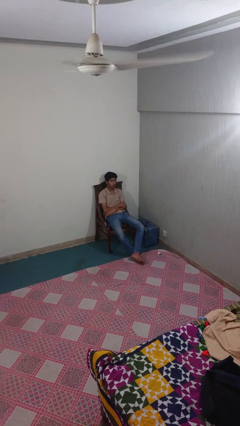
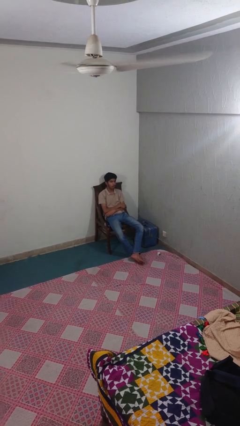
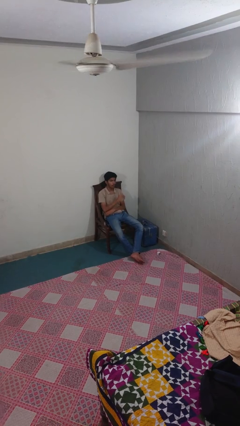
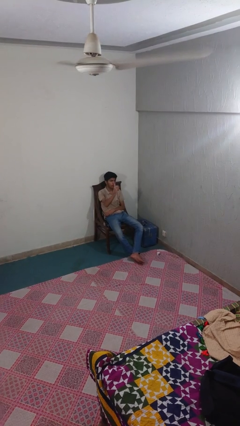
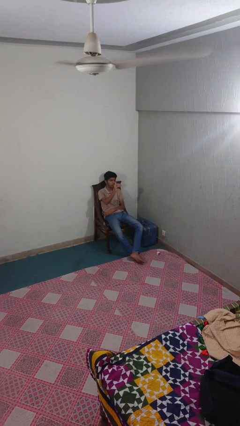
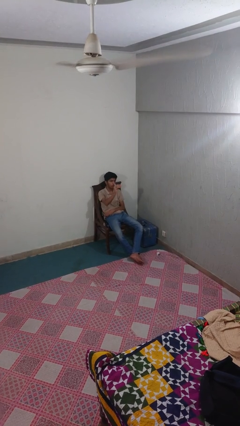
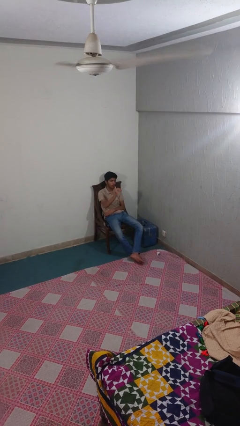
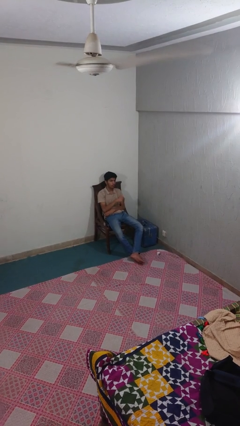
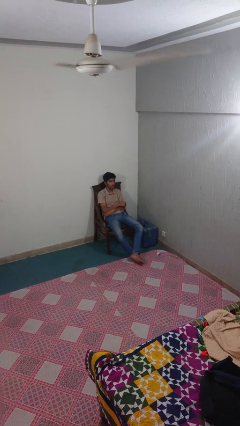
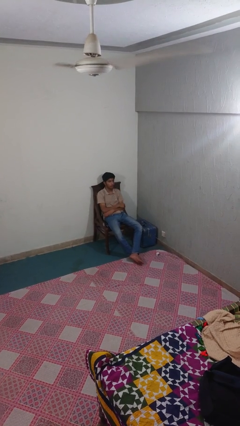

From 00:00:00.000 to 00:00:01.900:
person gestures come here

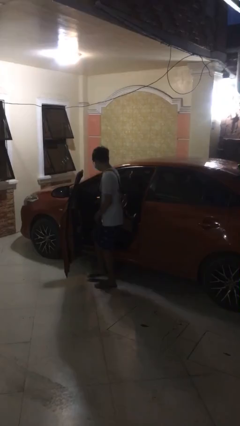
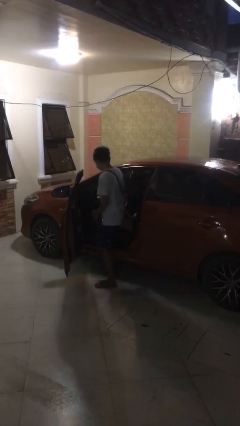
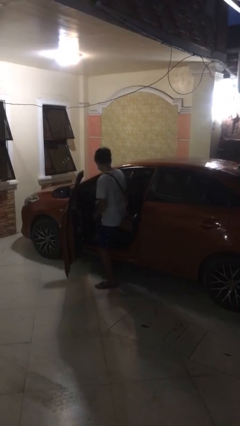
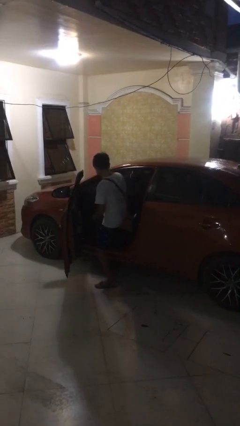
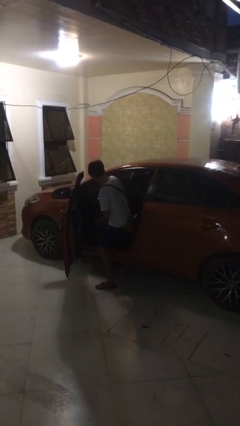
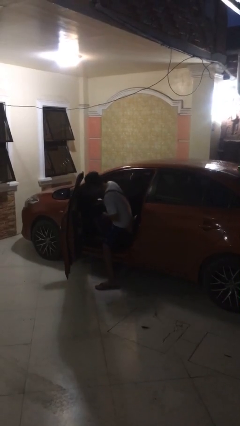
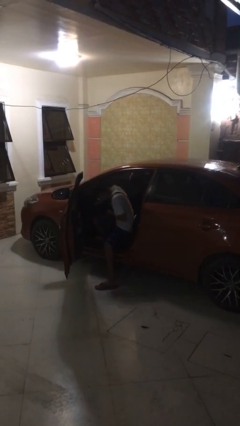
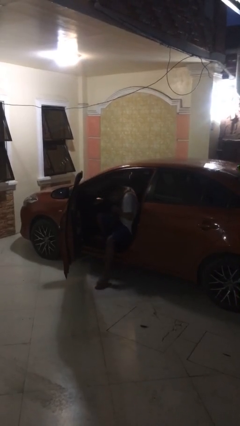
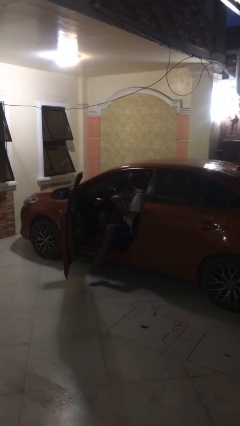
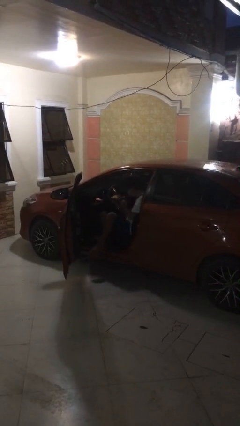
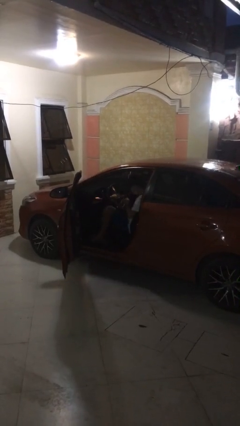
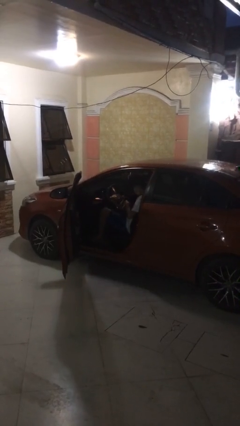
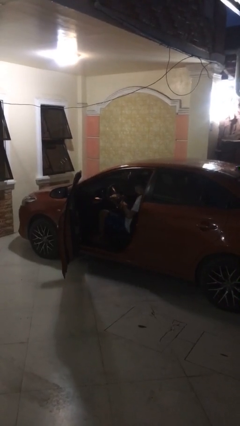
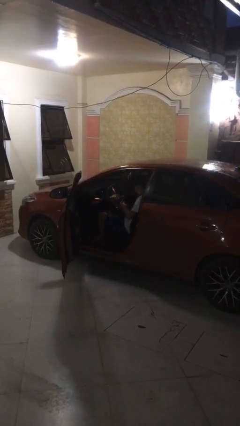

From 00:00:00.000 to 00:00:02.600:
person enters car

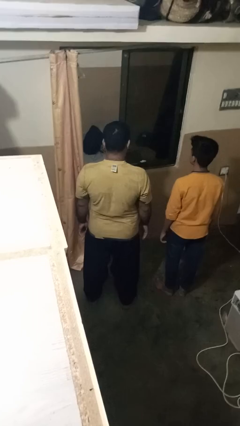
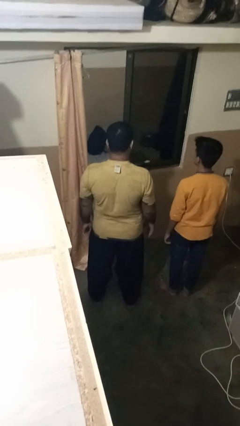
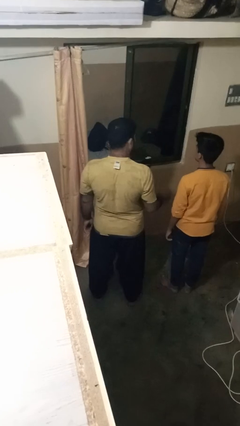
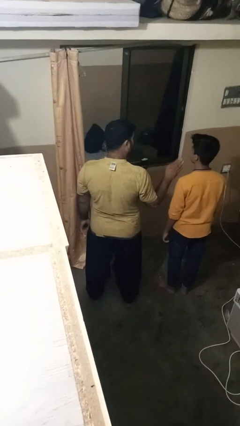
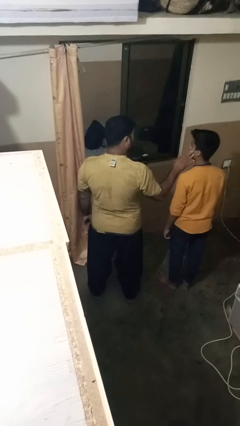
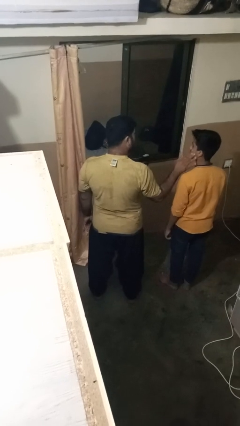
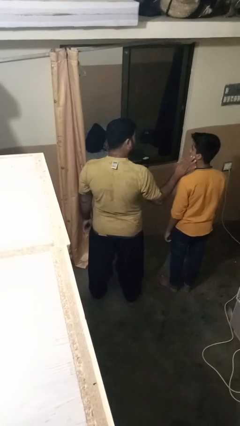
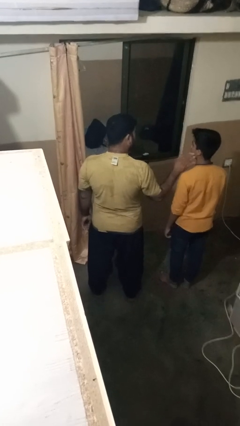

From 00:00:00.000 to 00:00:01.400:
person touches face of person

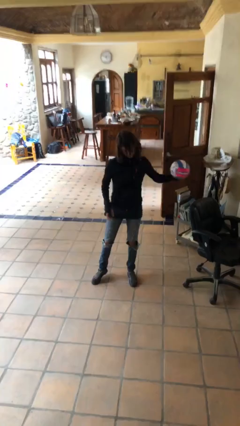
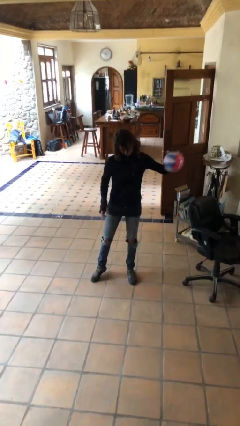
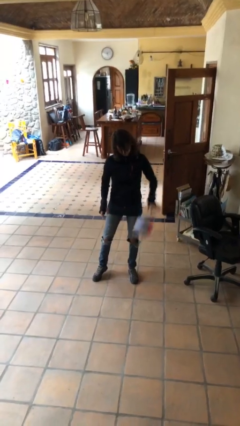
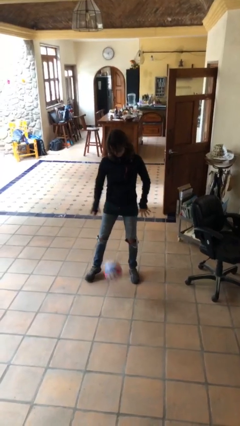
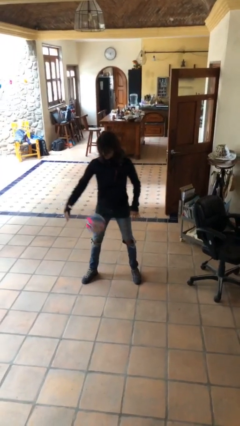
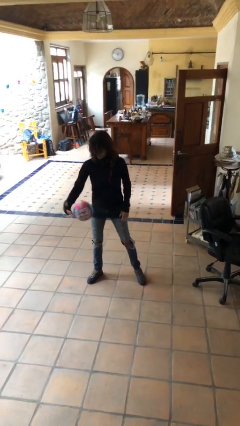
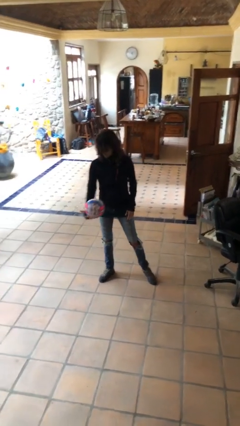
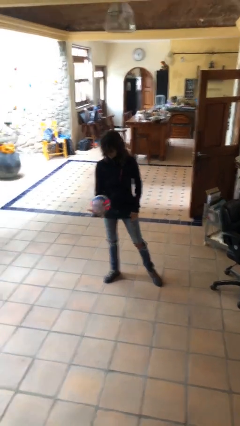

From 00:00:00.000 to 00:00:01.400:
person bounces ball on floor

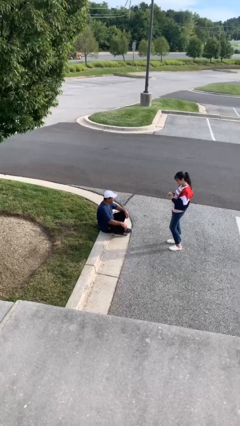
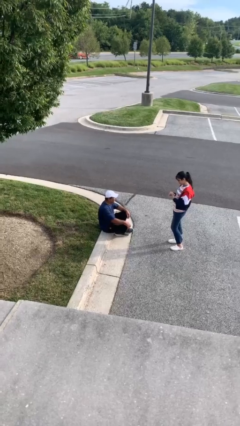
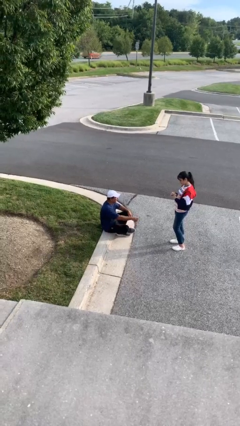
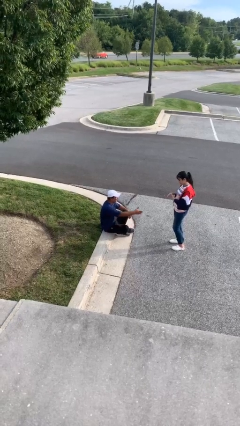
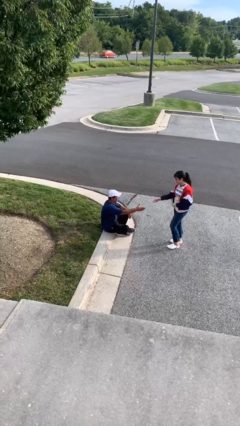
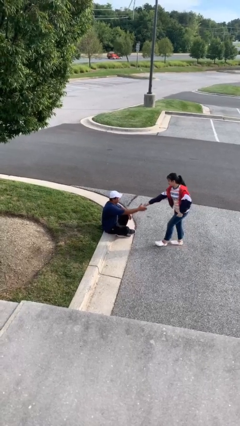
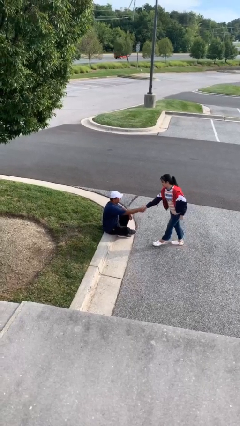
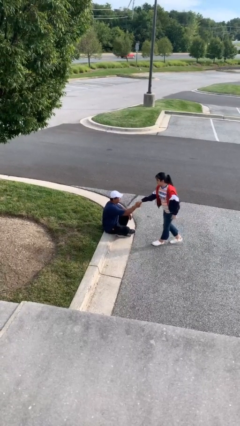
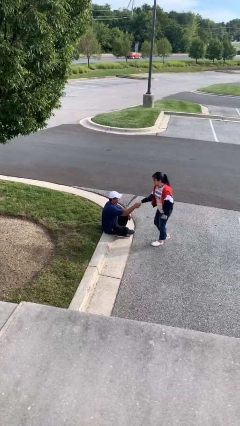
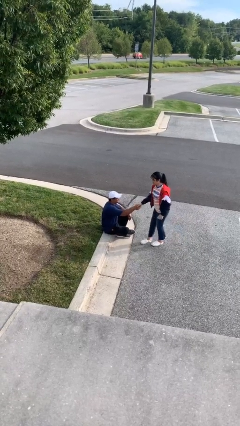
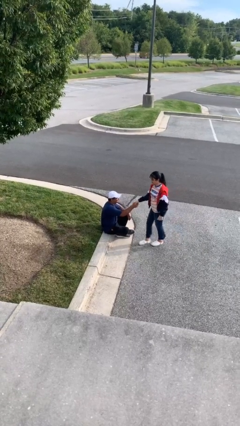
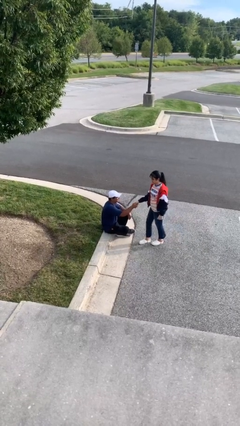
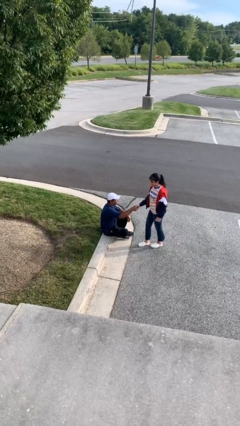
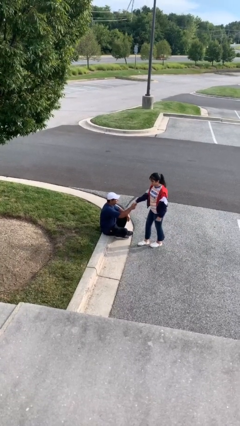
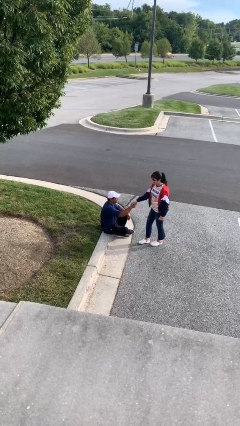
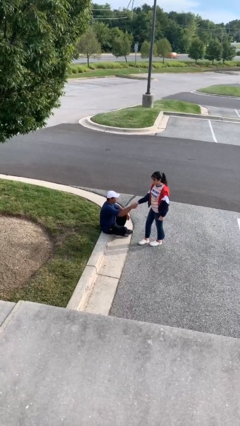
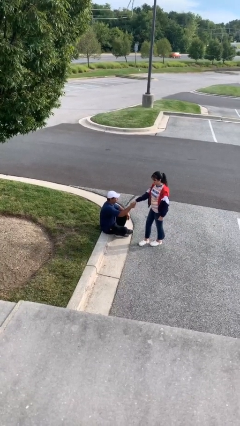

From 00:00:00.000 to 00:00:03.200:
person shakes hand

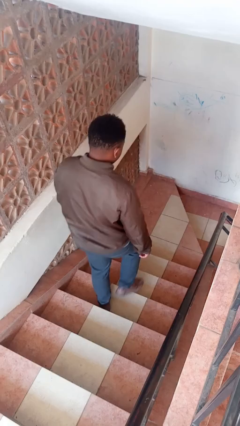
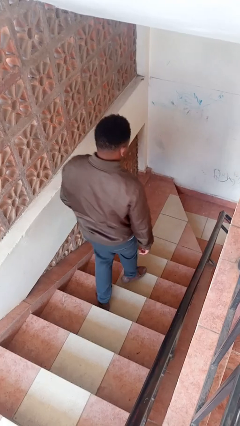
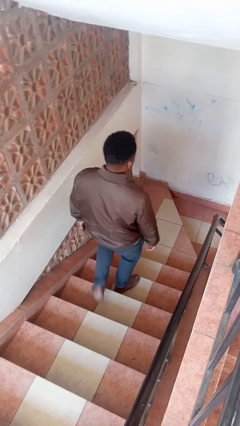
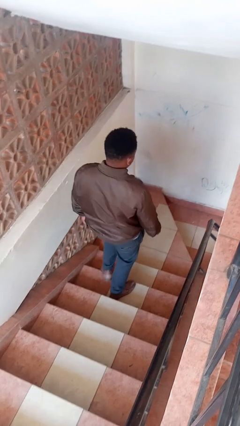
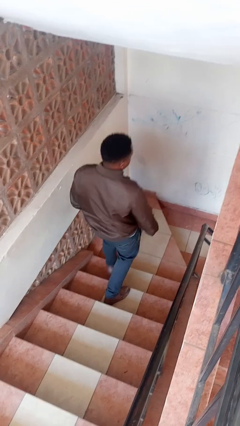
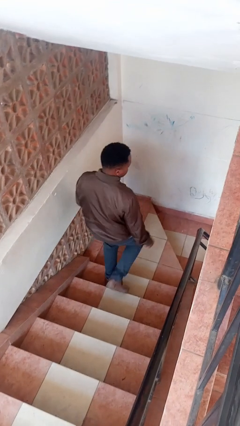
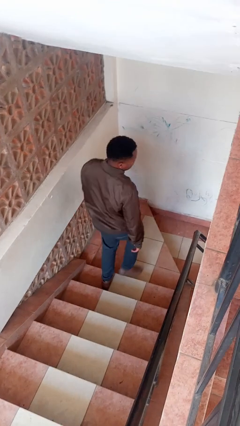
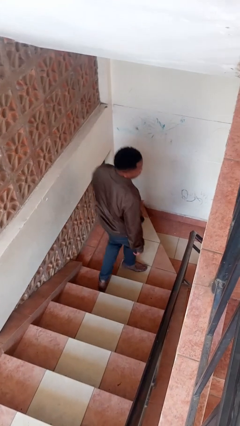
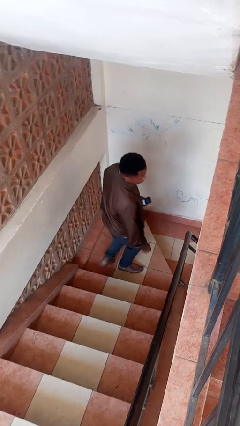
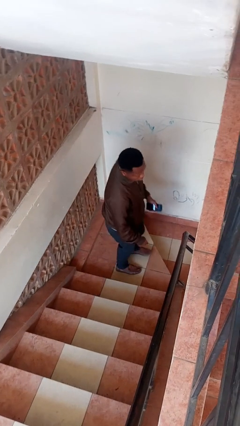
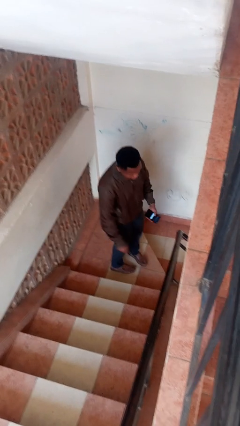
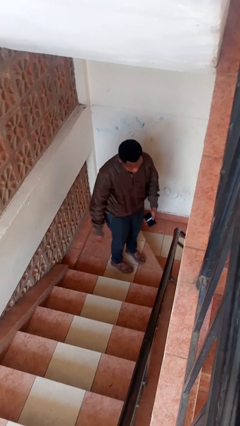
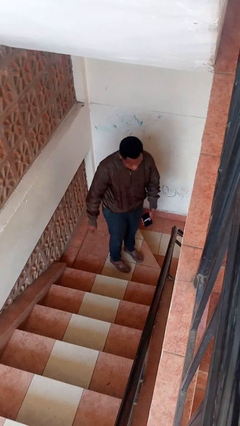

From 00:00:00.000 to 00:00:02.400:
person climbs down stairs

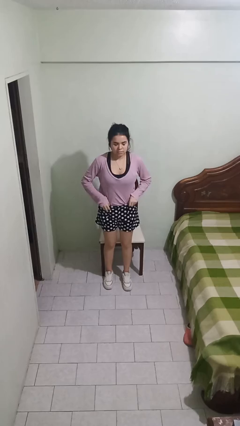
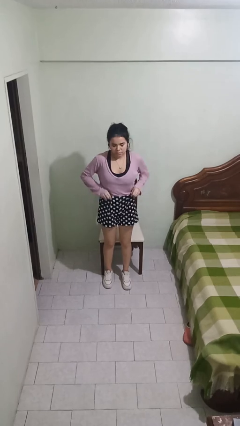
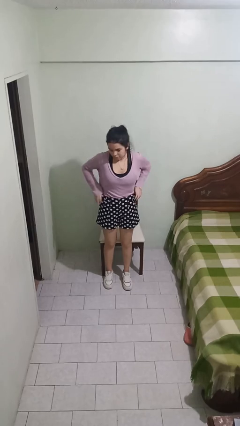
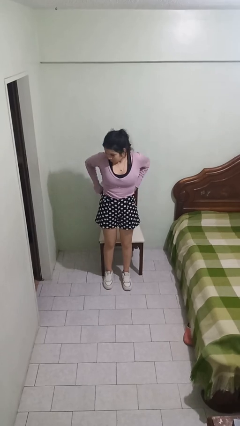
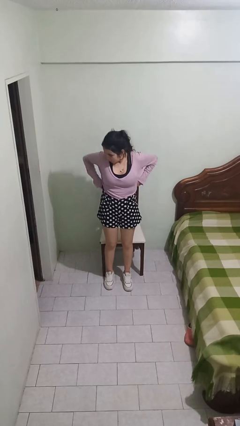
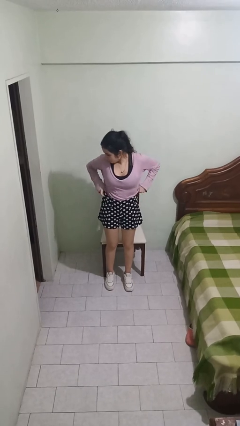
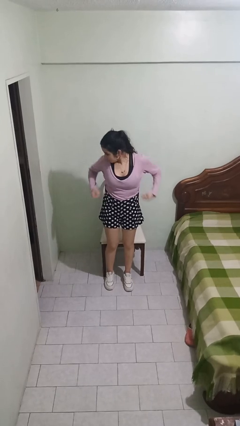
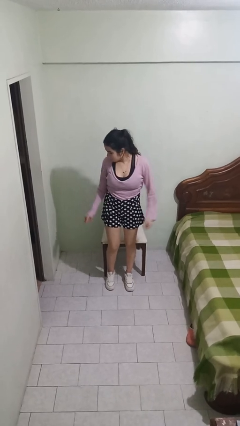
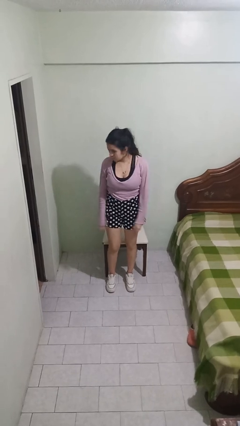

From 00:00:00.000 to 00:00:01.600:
person hikes up pants

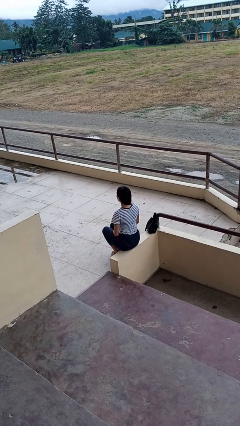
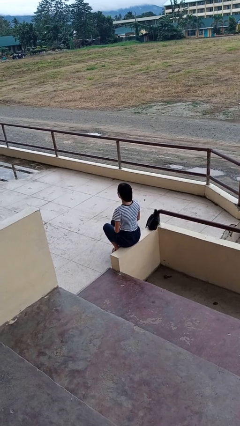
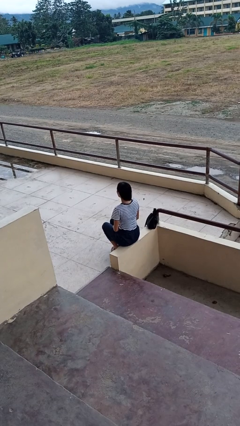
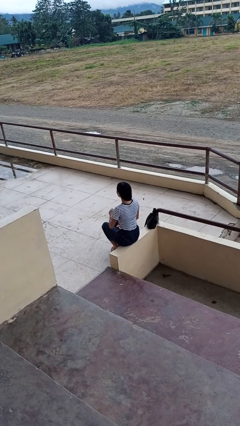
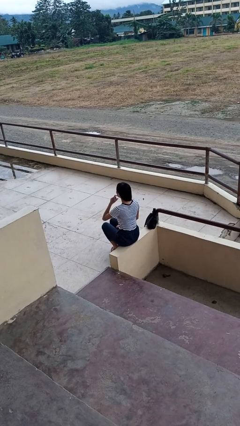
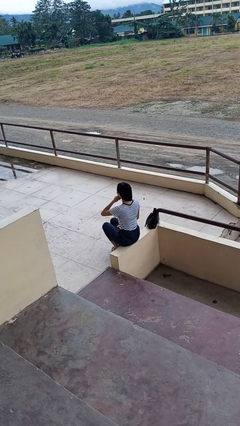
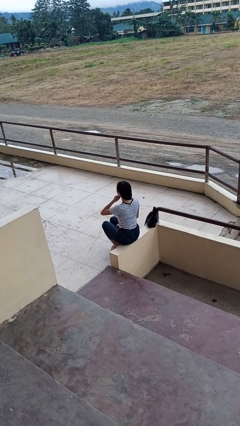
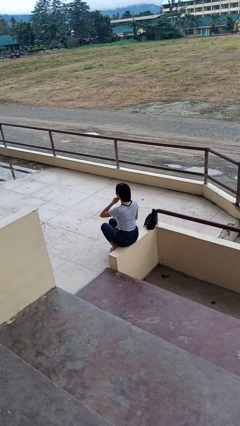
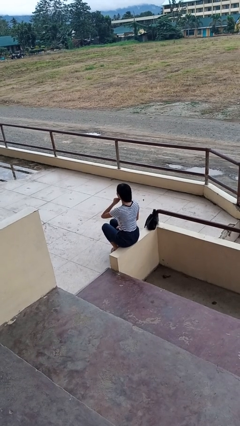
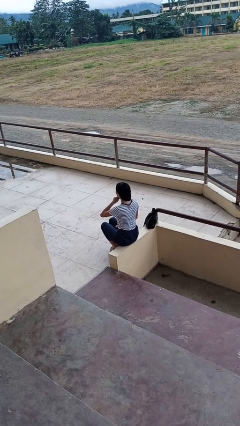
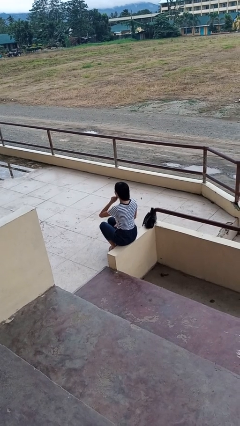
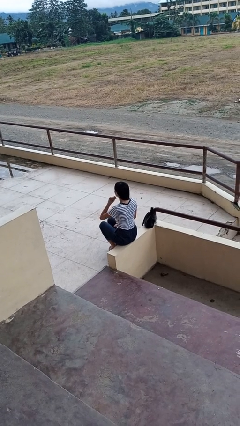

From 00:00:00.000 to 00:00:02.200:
person strokes chin

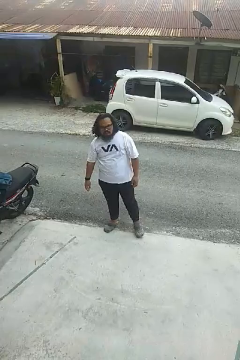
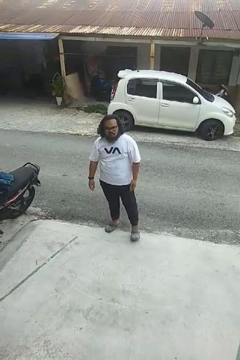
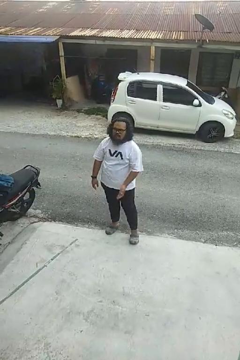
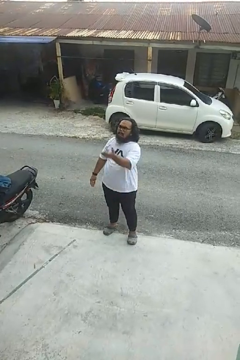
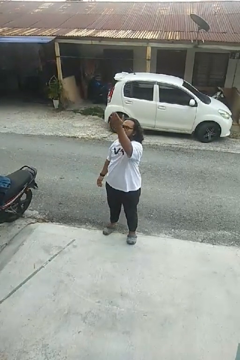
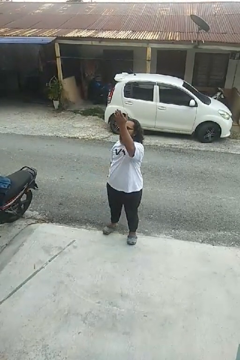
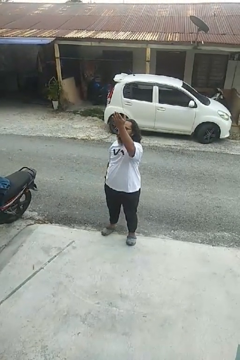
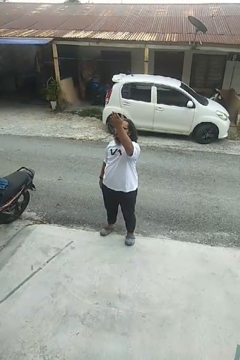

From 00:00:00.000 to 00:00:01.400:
person gestures swipe up
